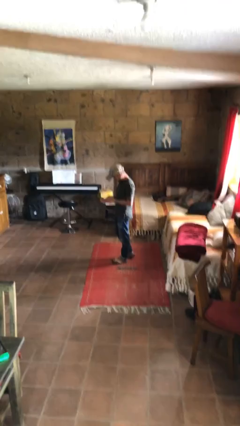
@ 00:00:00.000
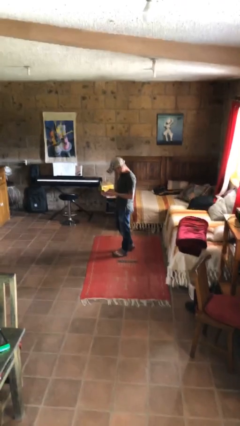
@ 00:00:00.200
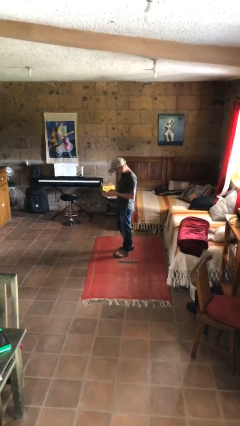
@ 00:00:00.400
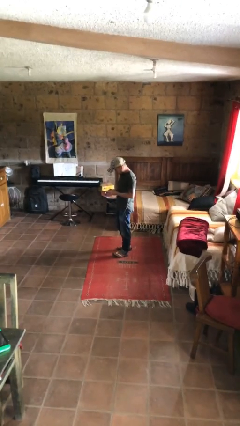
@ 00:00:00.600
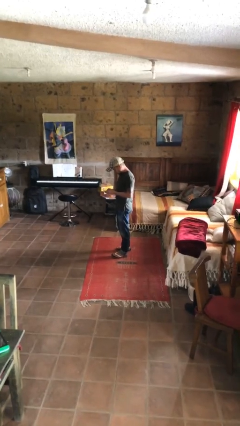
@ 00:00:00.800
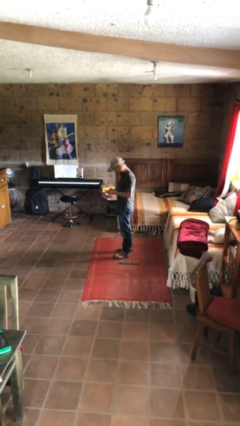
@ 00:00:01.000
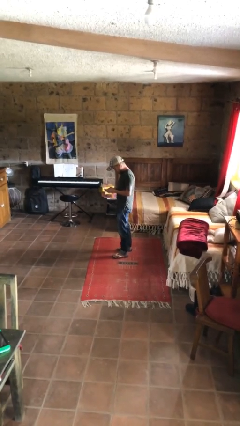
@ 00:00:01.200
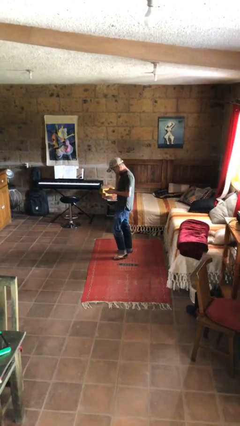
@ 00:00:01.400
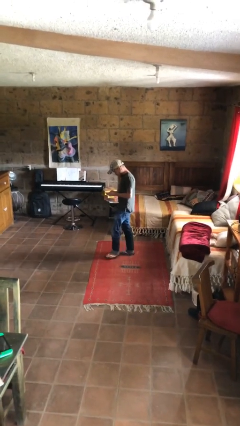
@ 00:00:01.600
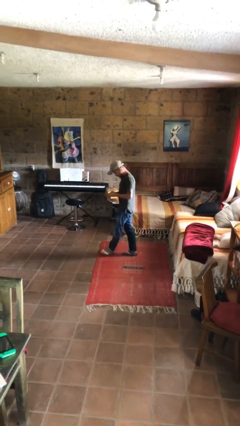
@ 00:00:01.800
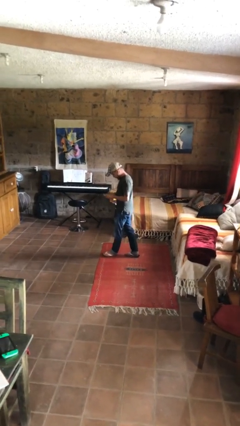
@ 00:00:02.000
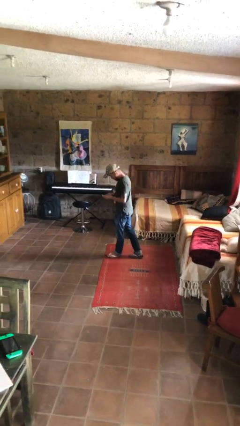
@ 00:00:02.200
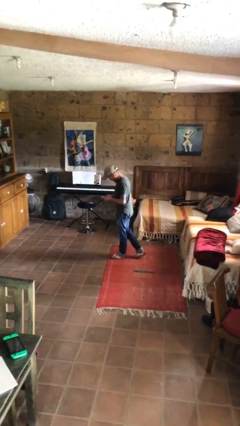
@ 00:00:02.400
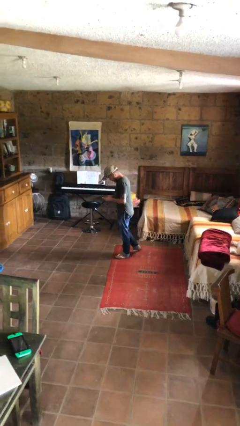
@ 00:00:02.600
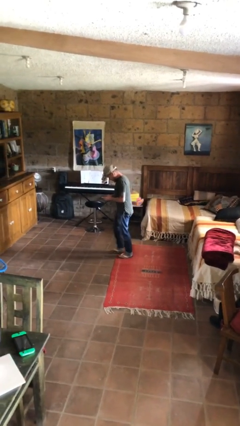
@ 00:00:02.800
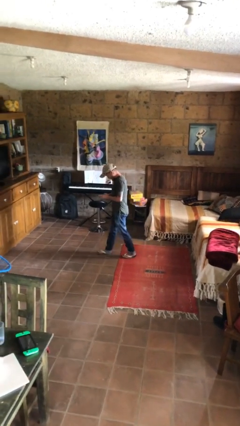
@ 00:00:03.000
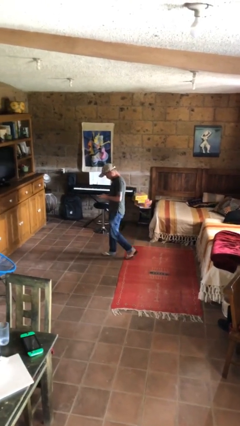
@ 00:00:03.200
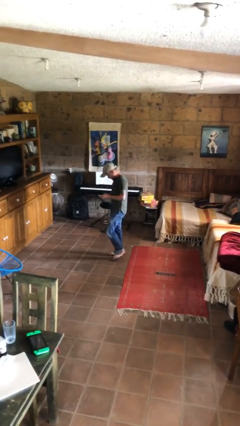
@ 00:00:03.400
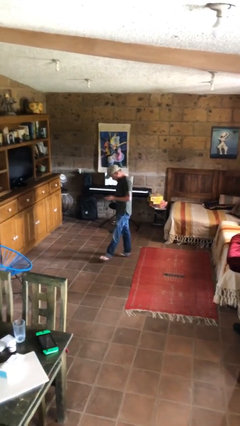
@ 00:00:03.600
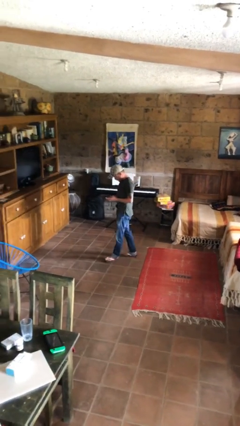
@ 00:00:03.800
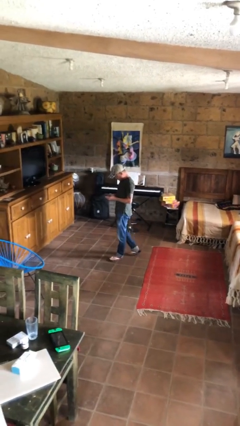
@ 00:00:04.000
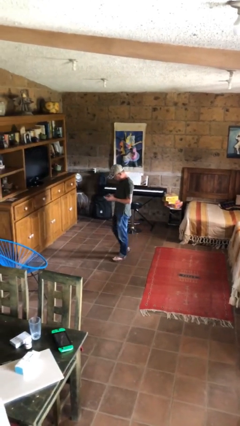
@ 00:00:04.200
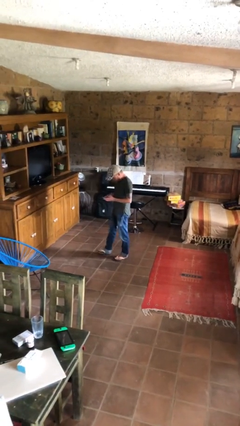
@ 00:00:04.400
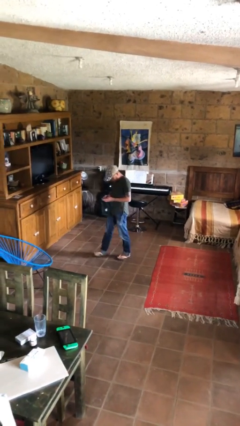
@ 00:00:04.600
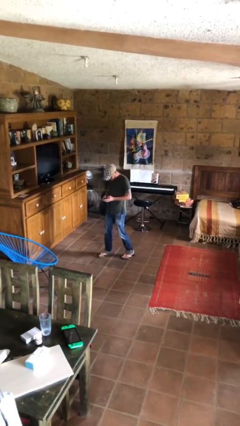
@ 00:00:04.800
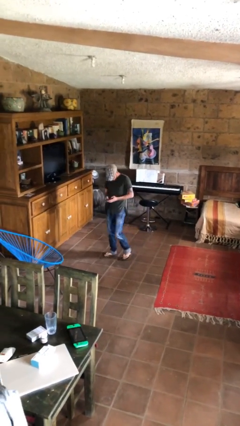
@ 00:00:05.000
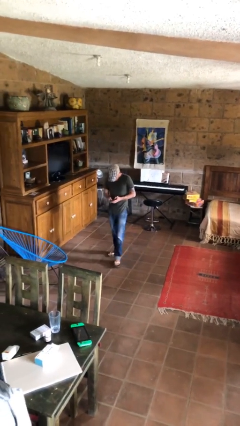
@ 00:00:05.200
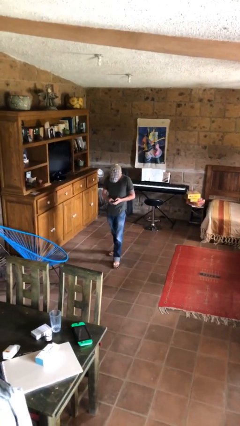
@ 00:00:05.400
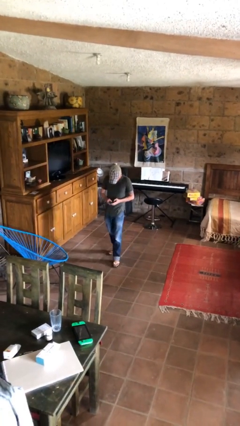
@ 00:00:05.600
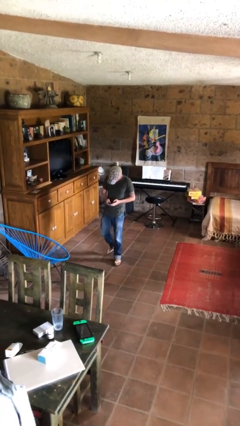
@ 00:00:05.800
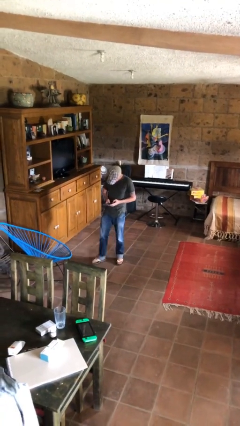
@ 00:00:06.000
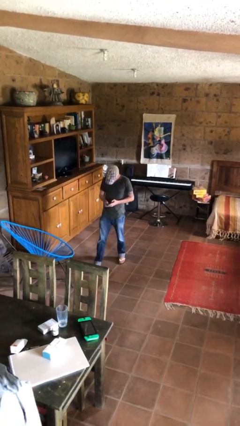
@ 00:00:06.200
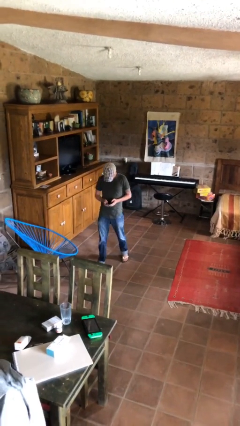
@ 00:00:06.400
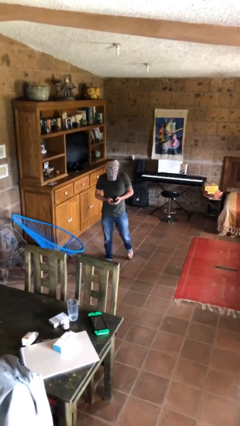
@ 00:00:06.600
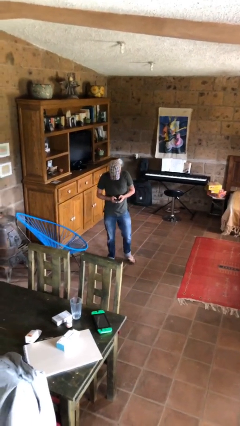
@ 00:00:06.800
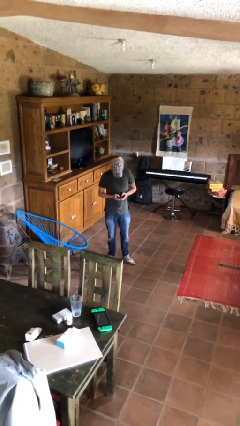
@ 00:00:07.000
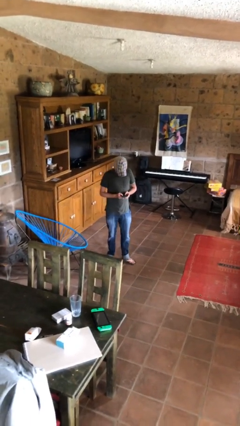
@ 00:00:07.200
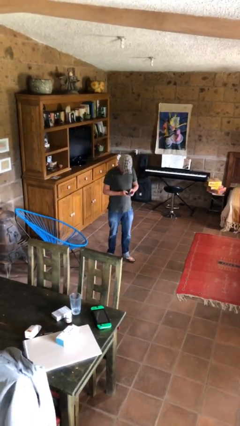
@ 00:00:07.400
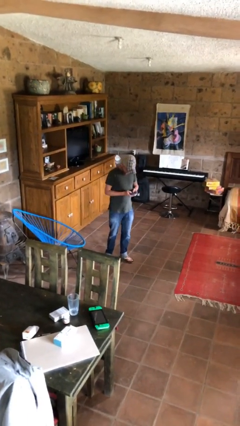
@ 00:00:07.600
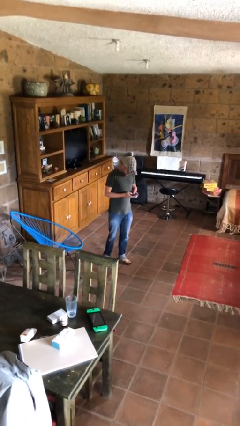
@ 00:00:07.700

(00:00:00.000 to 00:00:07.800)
person texts on phone

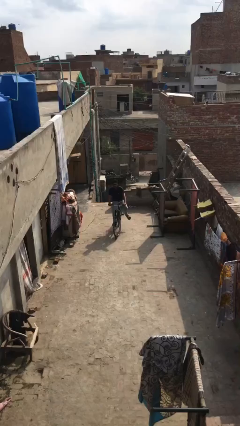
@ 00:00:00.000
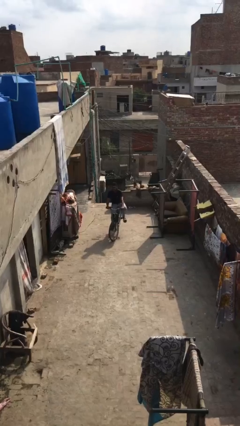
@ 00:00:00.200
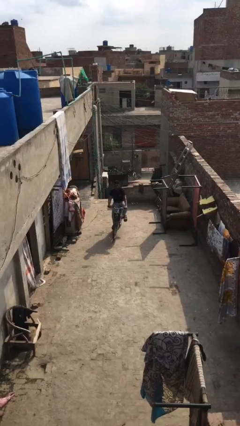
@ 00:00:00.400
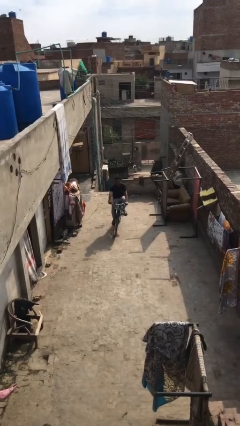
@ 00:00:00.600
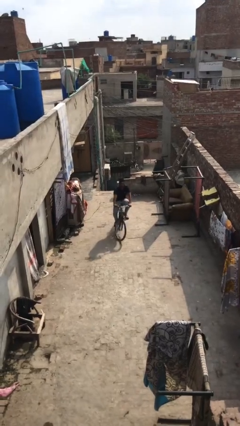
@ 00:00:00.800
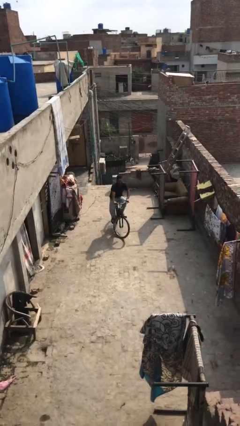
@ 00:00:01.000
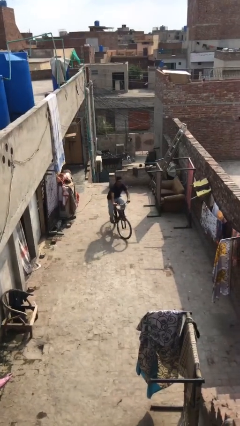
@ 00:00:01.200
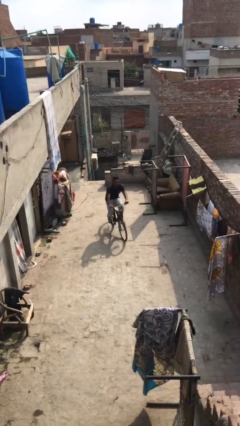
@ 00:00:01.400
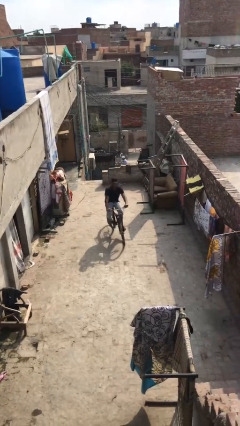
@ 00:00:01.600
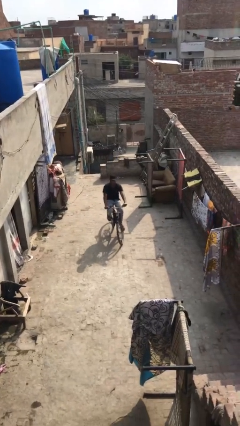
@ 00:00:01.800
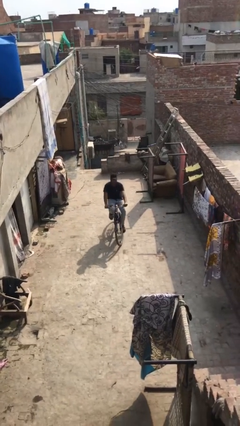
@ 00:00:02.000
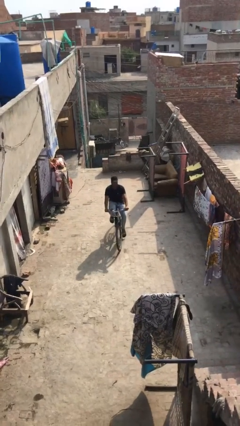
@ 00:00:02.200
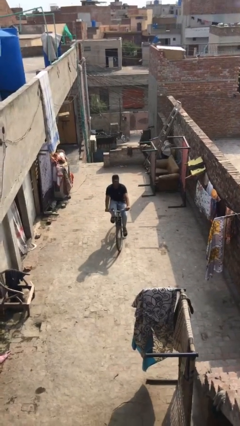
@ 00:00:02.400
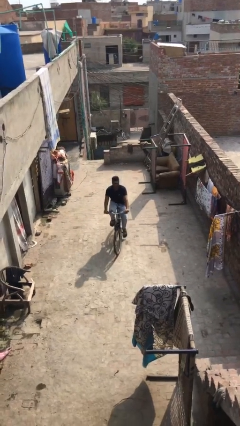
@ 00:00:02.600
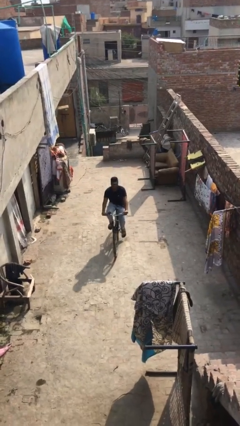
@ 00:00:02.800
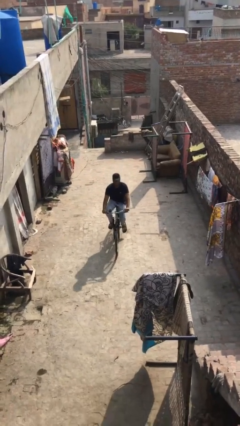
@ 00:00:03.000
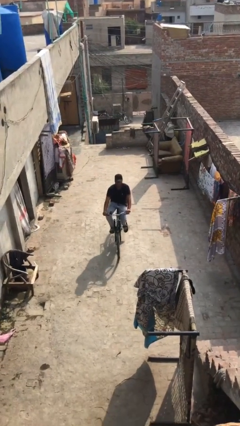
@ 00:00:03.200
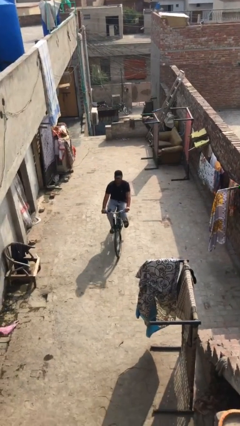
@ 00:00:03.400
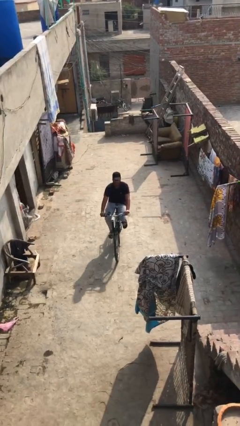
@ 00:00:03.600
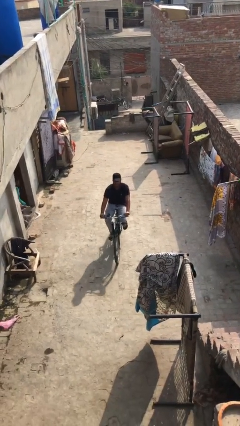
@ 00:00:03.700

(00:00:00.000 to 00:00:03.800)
person rides bicycle

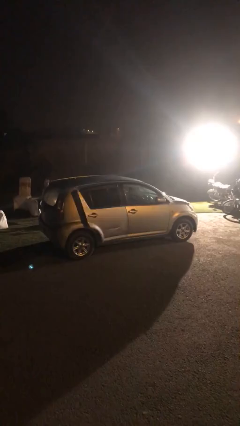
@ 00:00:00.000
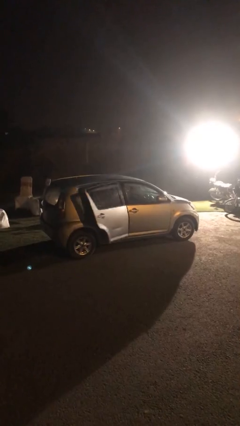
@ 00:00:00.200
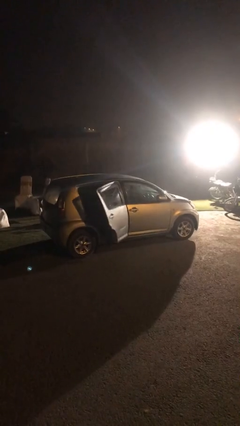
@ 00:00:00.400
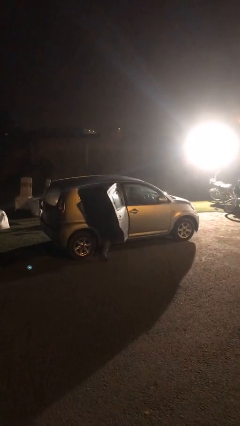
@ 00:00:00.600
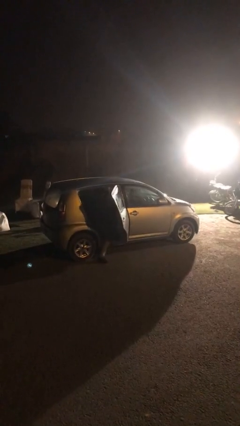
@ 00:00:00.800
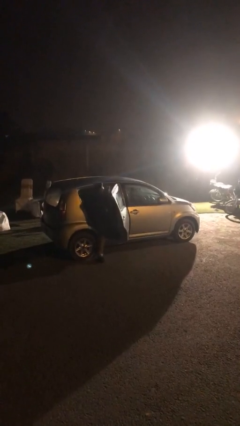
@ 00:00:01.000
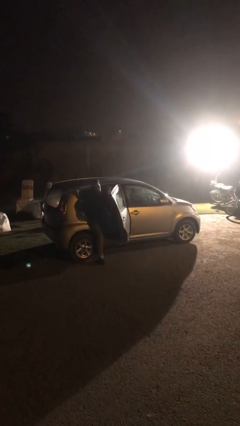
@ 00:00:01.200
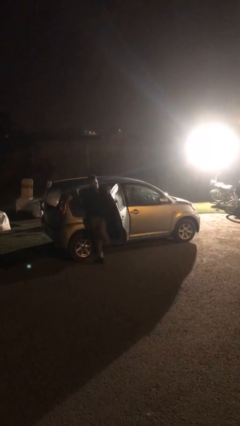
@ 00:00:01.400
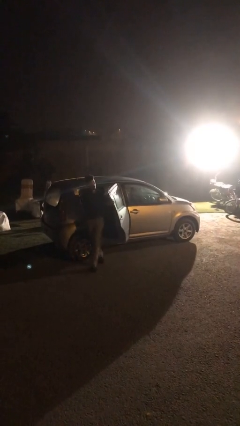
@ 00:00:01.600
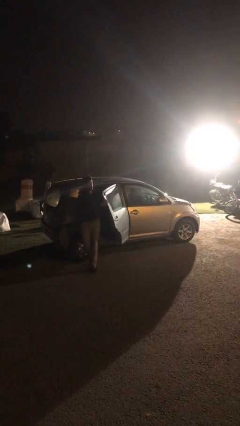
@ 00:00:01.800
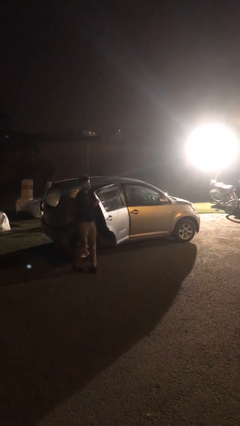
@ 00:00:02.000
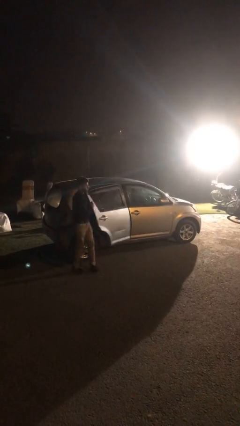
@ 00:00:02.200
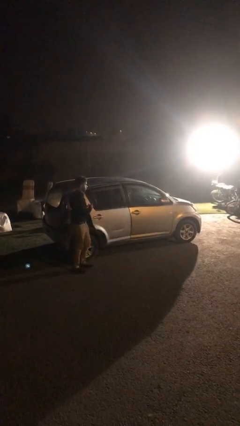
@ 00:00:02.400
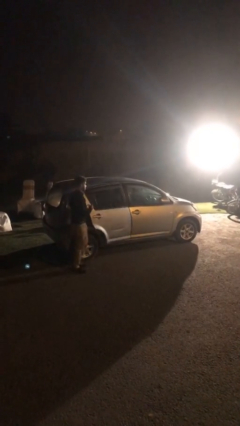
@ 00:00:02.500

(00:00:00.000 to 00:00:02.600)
car drops off person

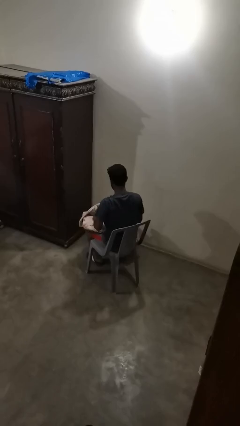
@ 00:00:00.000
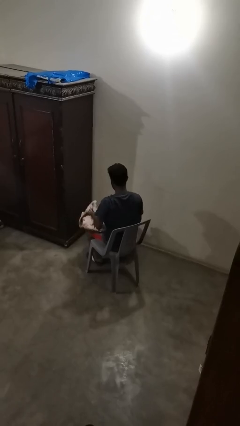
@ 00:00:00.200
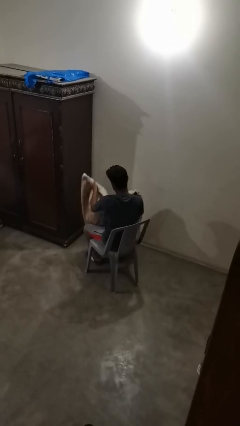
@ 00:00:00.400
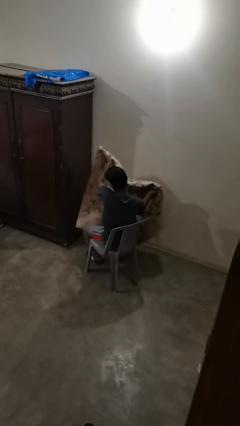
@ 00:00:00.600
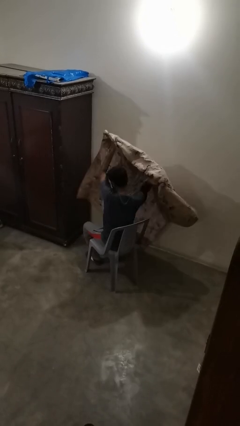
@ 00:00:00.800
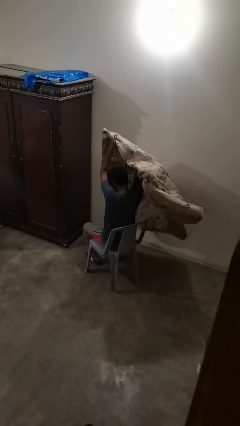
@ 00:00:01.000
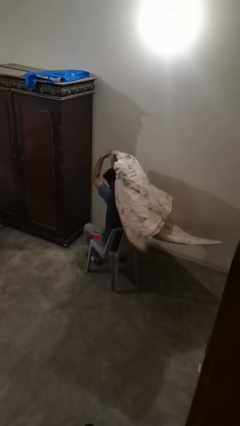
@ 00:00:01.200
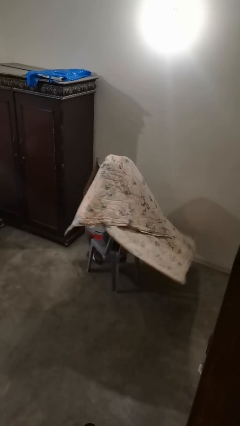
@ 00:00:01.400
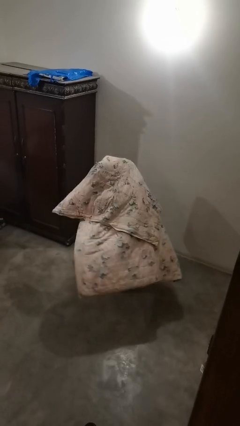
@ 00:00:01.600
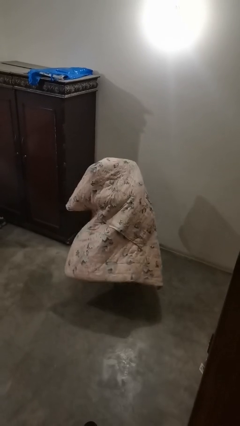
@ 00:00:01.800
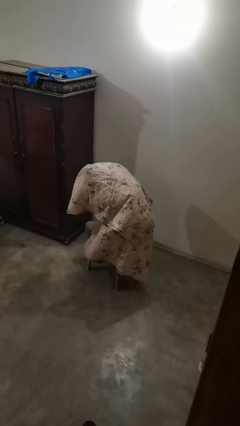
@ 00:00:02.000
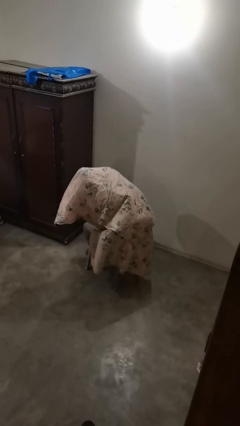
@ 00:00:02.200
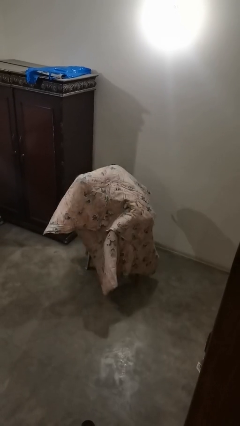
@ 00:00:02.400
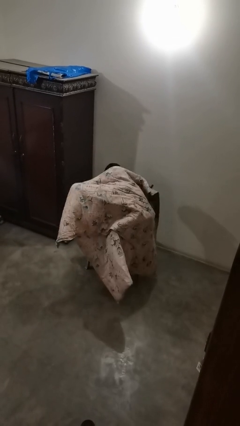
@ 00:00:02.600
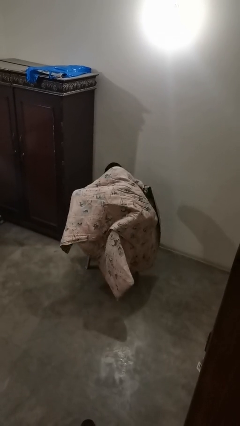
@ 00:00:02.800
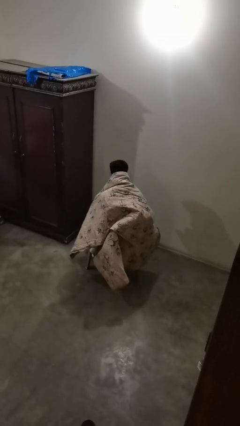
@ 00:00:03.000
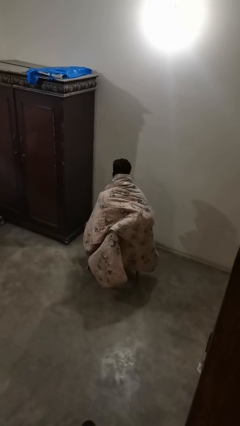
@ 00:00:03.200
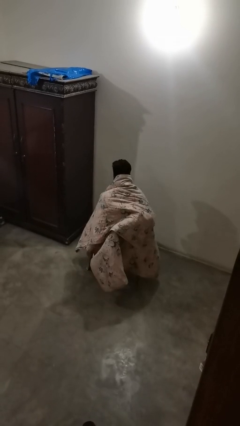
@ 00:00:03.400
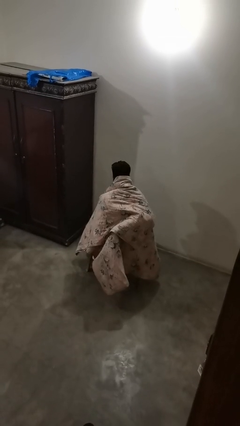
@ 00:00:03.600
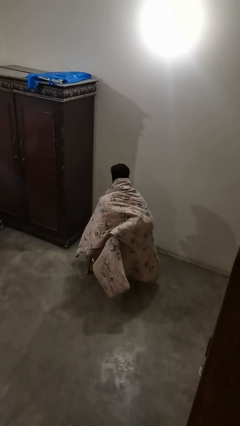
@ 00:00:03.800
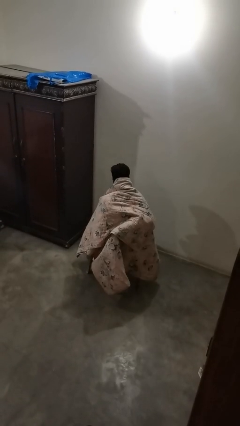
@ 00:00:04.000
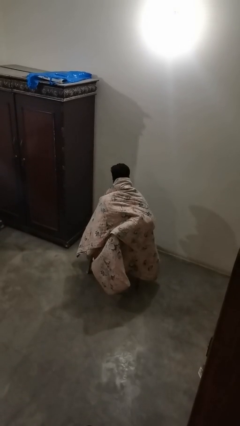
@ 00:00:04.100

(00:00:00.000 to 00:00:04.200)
person covers with blanket
